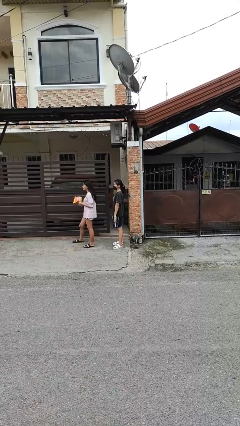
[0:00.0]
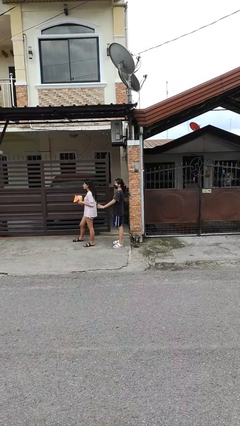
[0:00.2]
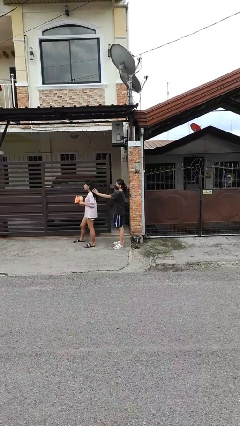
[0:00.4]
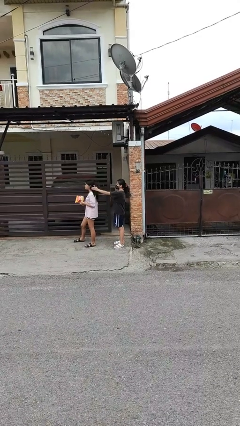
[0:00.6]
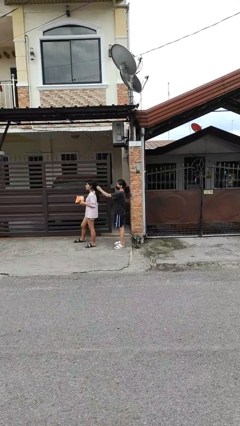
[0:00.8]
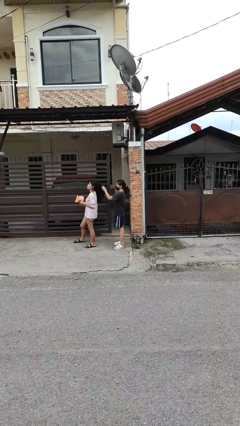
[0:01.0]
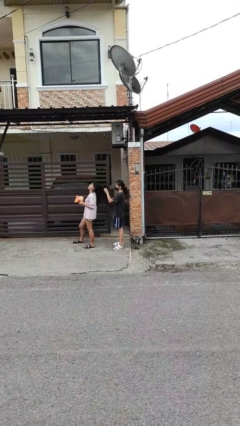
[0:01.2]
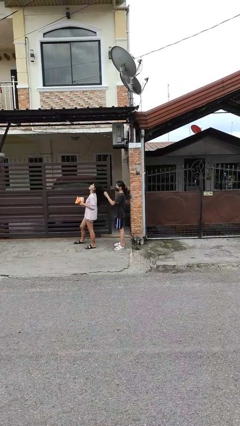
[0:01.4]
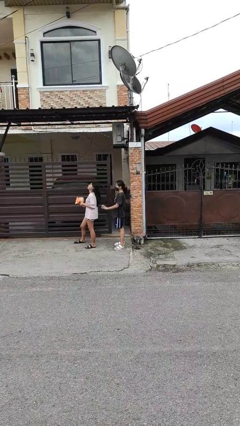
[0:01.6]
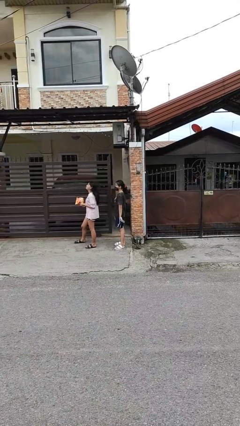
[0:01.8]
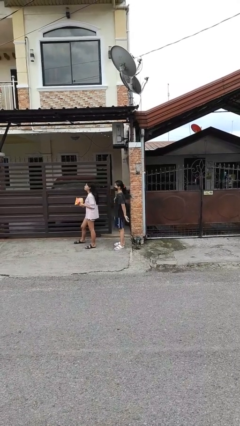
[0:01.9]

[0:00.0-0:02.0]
person grabs person by hair

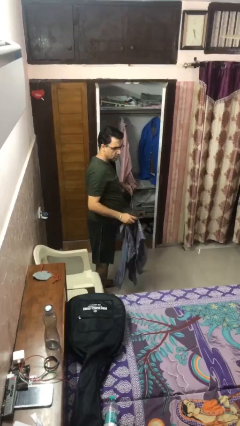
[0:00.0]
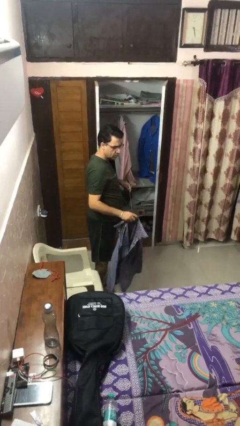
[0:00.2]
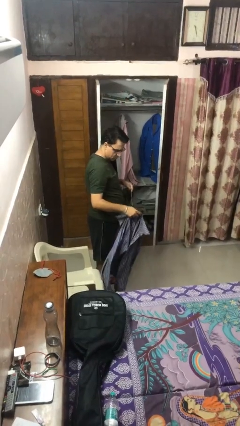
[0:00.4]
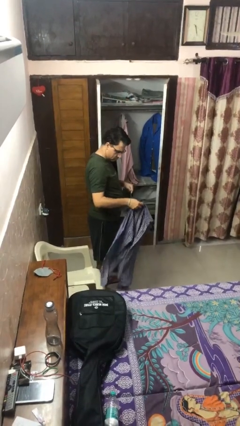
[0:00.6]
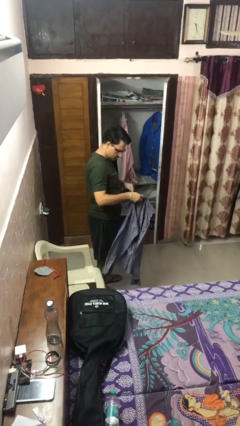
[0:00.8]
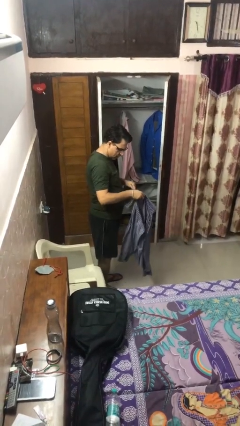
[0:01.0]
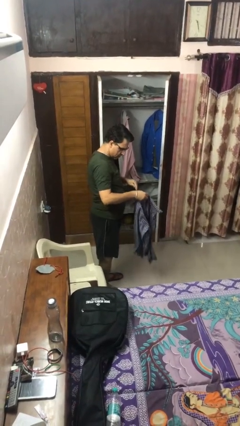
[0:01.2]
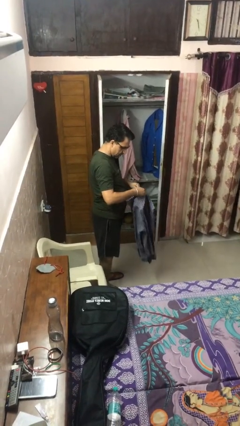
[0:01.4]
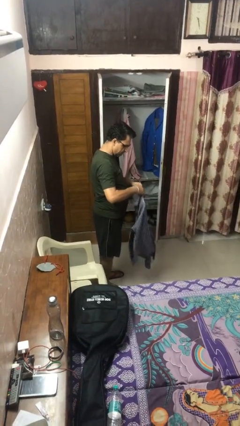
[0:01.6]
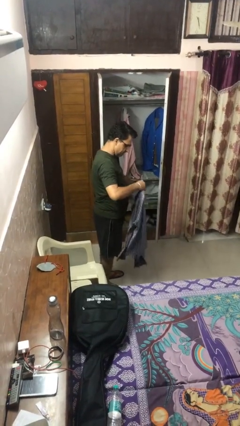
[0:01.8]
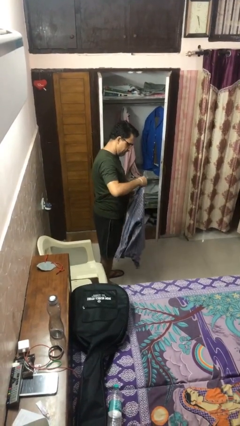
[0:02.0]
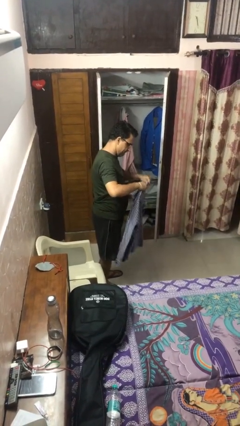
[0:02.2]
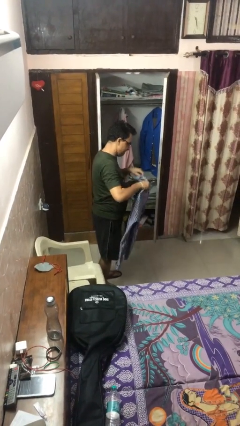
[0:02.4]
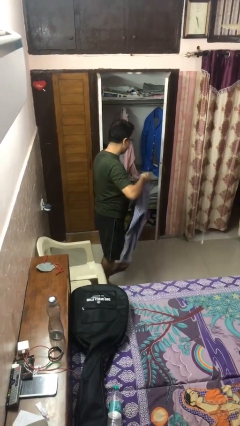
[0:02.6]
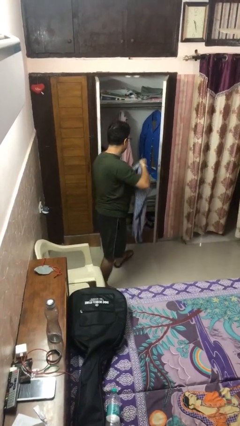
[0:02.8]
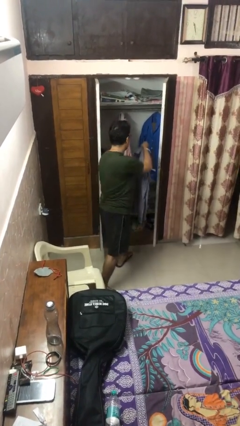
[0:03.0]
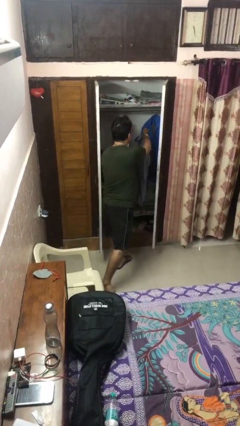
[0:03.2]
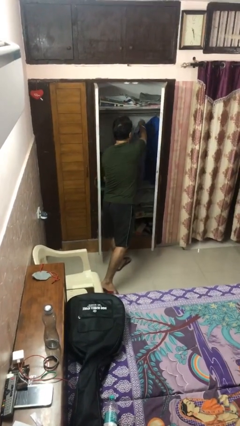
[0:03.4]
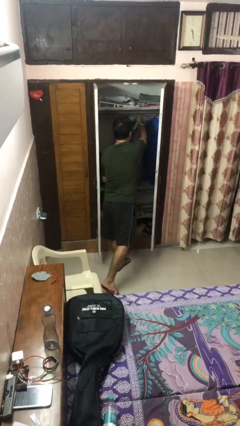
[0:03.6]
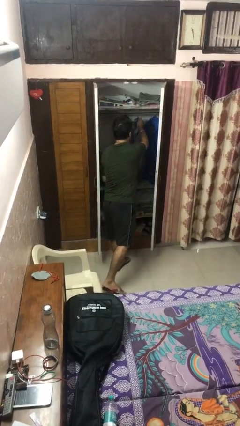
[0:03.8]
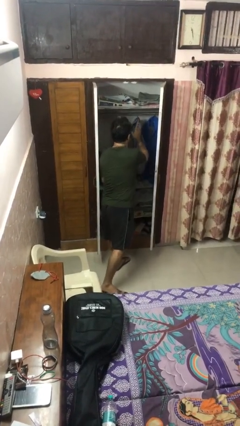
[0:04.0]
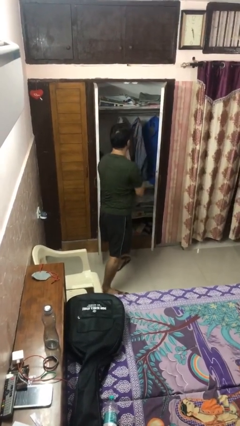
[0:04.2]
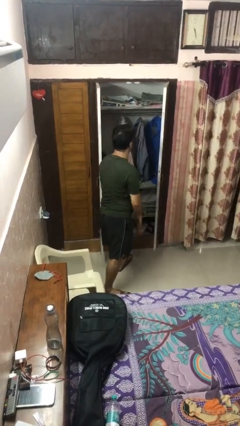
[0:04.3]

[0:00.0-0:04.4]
person puts clothes into closet

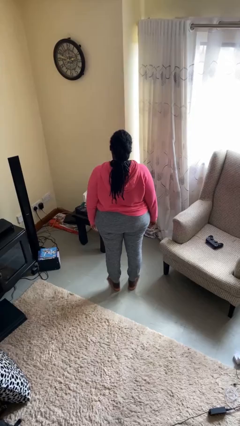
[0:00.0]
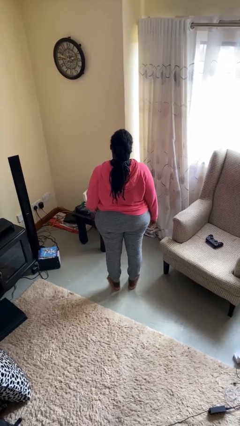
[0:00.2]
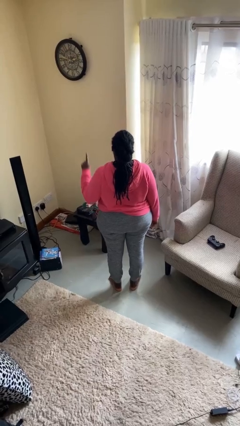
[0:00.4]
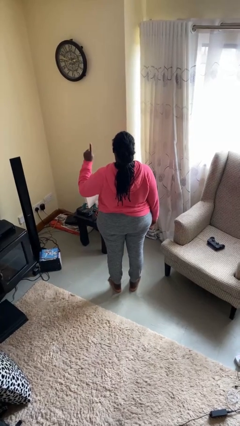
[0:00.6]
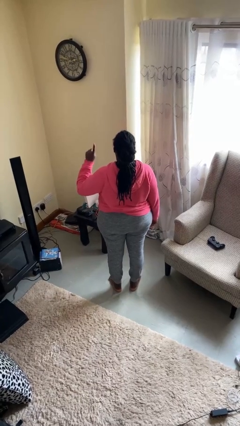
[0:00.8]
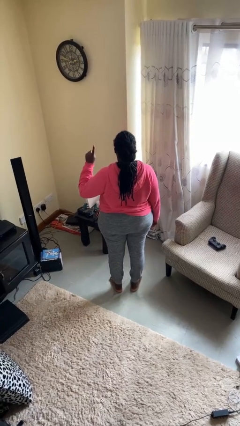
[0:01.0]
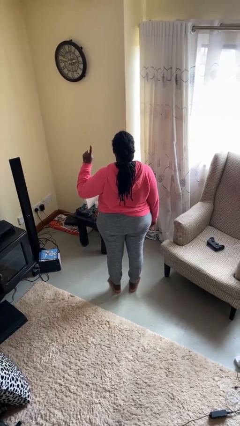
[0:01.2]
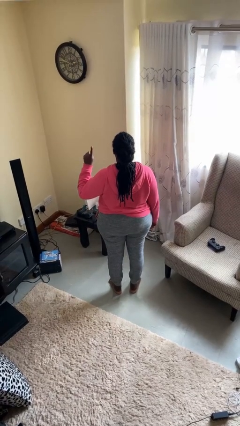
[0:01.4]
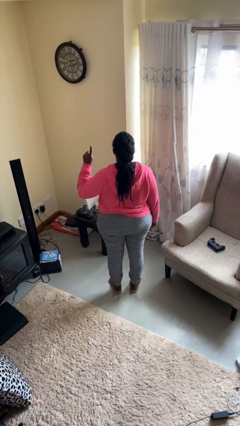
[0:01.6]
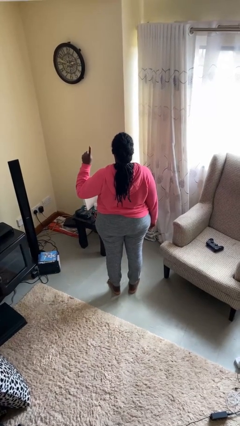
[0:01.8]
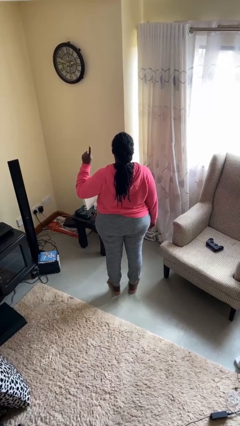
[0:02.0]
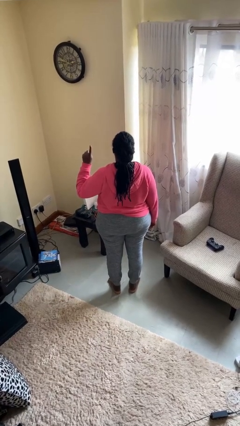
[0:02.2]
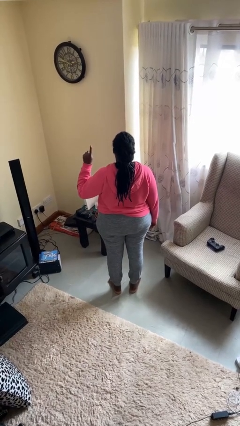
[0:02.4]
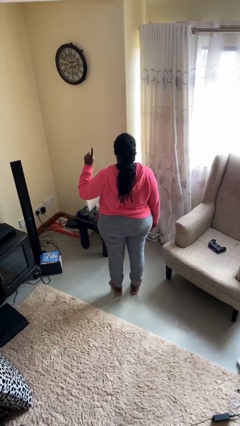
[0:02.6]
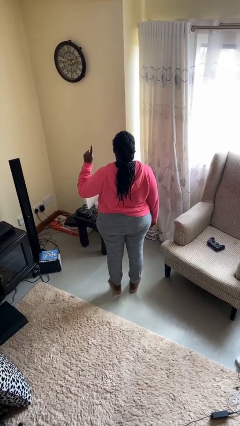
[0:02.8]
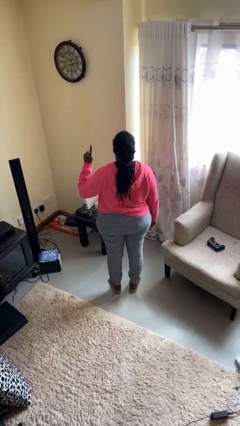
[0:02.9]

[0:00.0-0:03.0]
person gestures number one

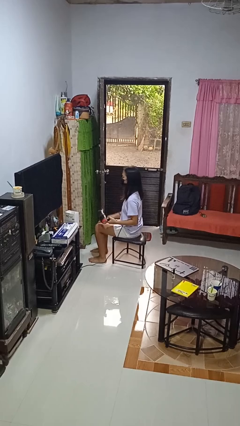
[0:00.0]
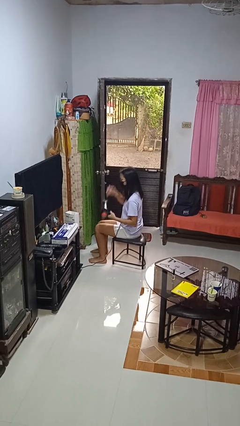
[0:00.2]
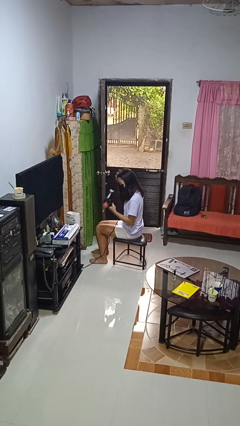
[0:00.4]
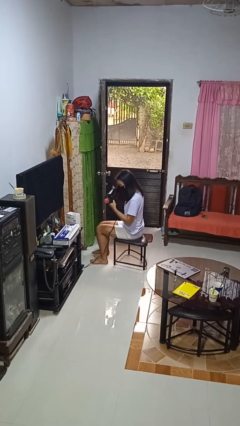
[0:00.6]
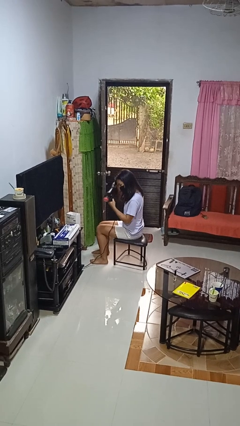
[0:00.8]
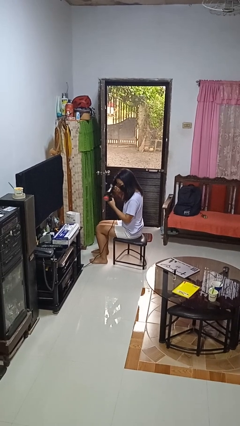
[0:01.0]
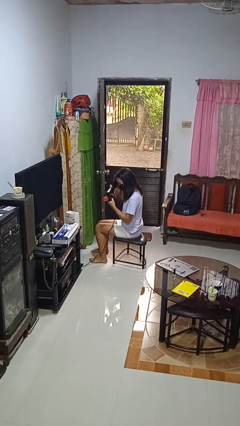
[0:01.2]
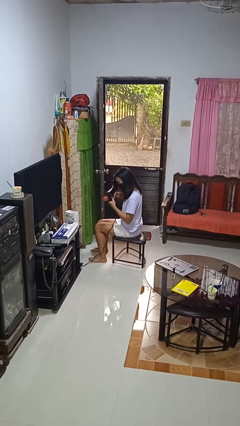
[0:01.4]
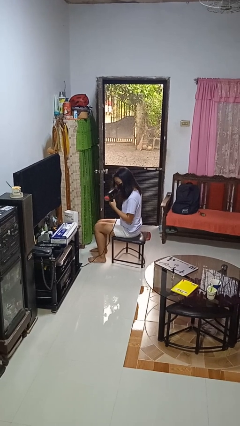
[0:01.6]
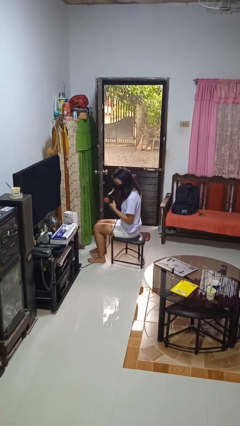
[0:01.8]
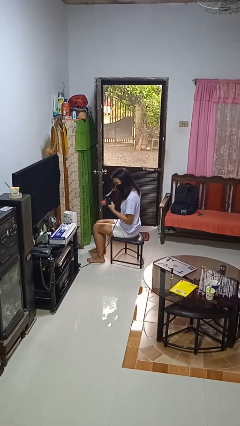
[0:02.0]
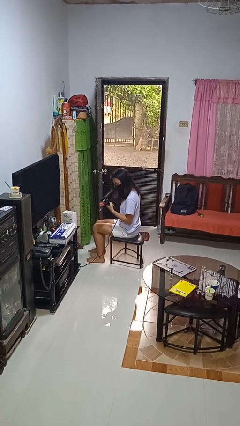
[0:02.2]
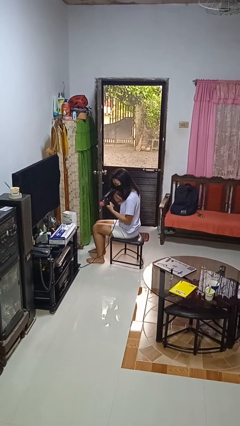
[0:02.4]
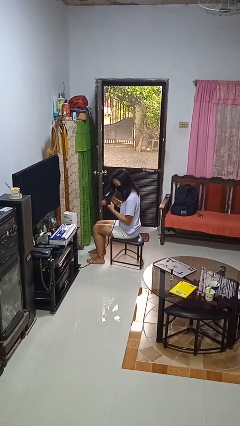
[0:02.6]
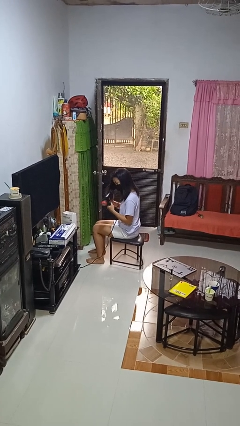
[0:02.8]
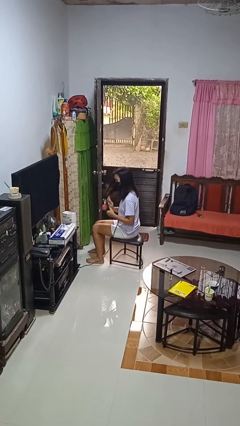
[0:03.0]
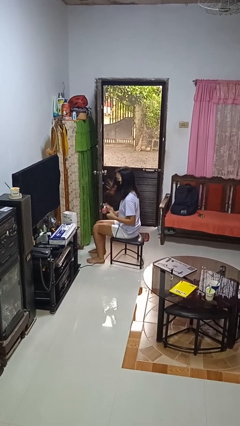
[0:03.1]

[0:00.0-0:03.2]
person dries hair with hairdryer

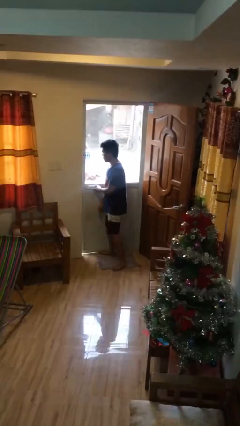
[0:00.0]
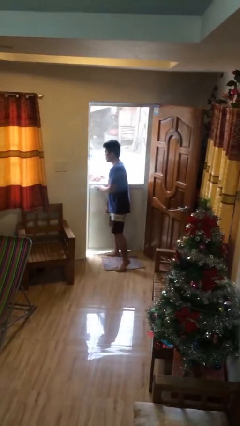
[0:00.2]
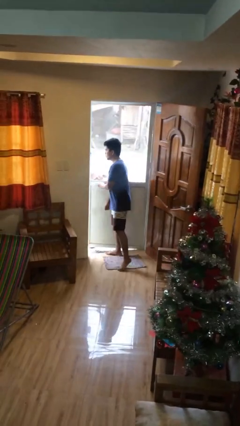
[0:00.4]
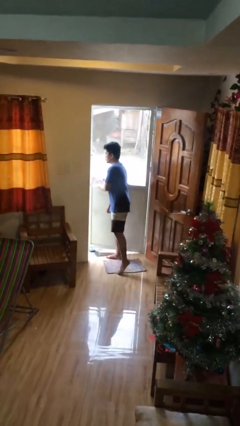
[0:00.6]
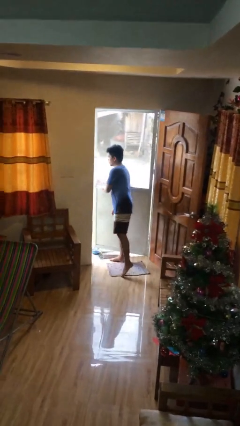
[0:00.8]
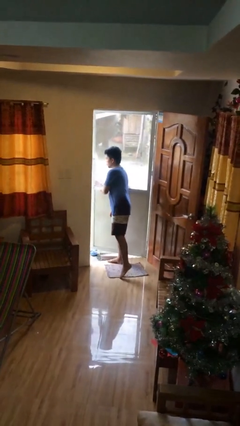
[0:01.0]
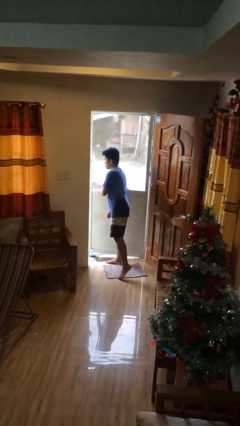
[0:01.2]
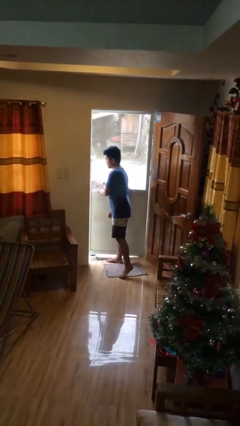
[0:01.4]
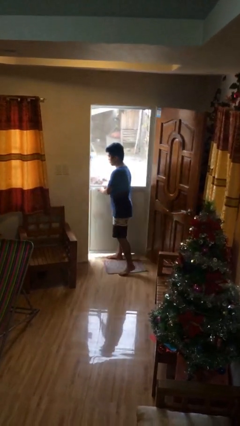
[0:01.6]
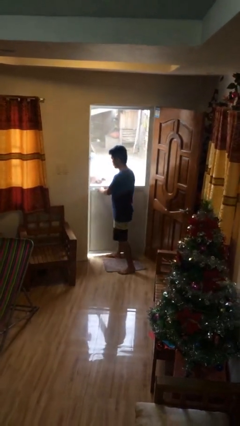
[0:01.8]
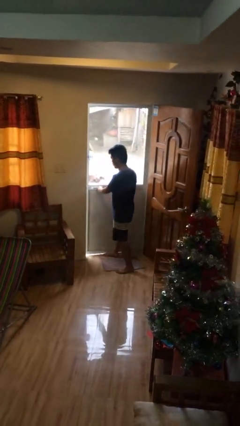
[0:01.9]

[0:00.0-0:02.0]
person opens facility door

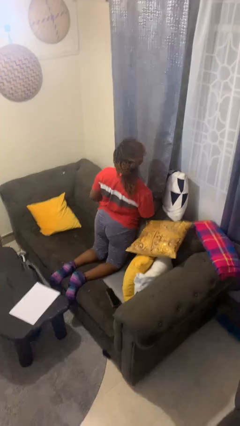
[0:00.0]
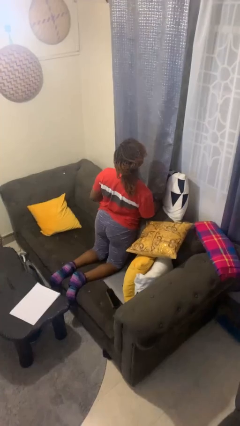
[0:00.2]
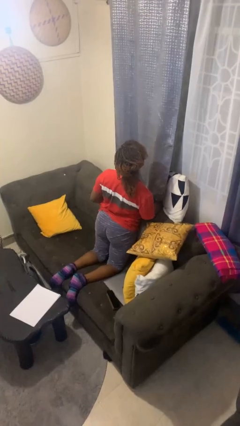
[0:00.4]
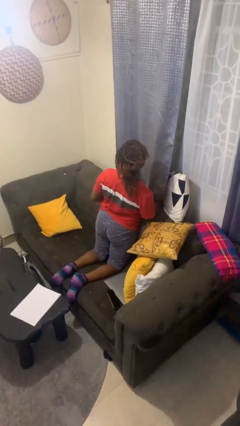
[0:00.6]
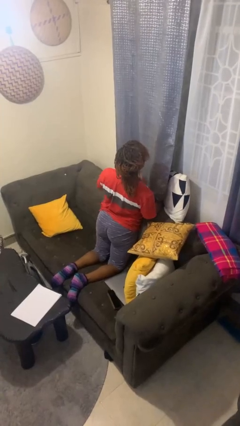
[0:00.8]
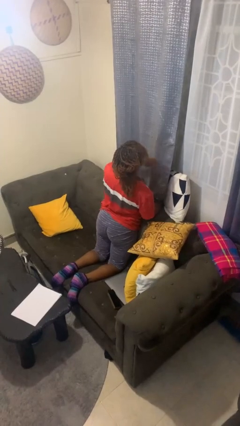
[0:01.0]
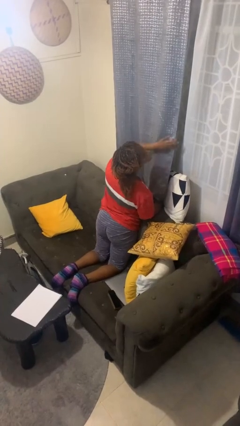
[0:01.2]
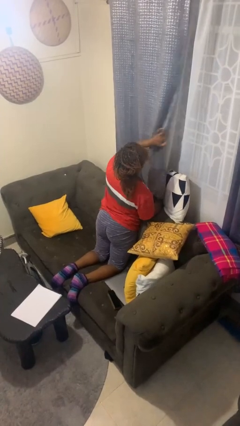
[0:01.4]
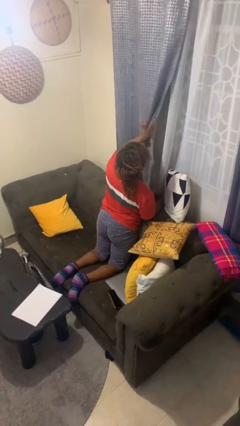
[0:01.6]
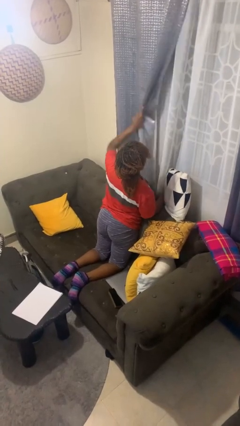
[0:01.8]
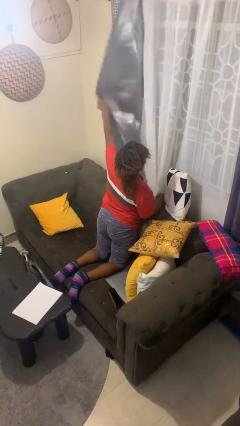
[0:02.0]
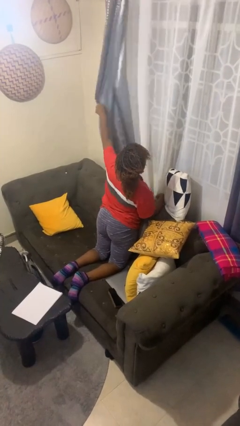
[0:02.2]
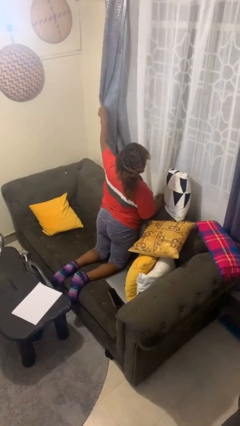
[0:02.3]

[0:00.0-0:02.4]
person opens curtains
